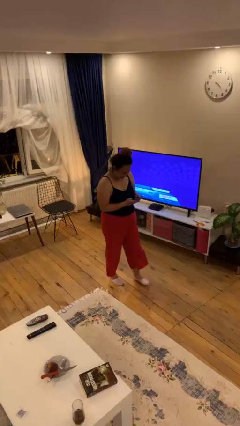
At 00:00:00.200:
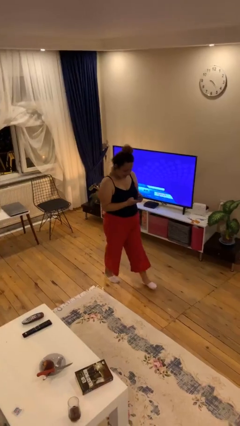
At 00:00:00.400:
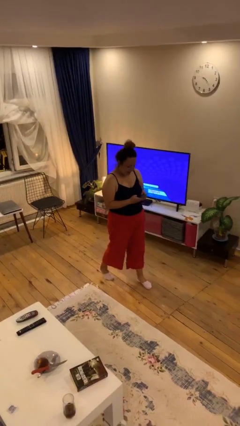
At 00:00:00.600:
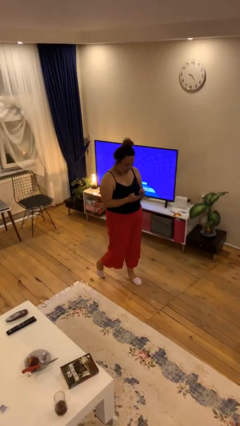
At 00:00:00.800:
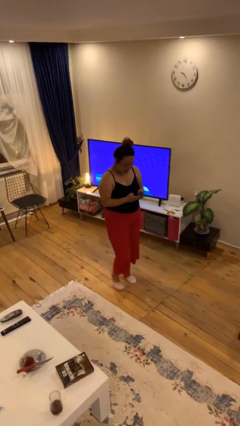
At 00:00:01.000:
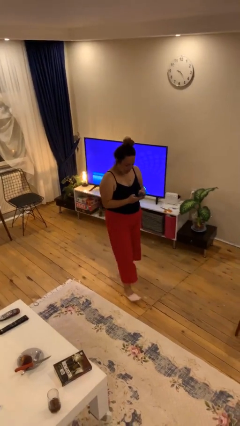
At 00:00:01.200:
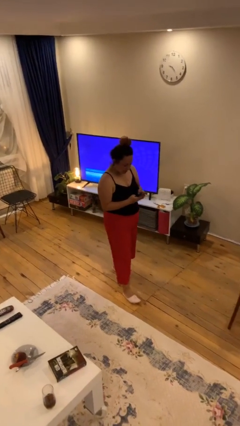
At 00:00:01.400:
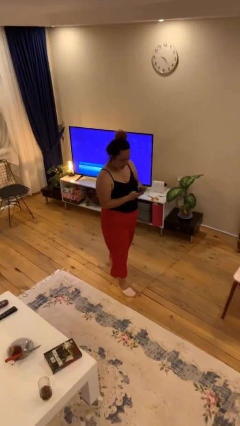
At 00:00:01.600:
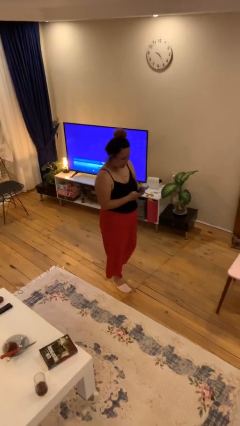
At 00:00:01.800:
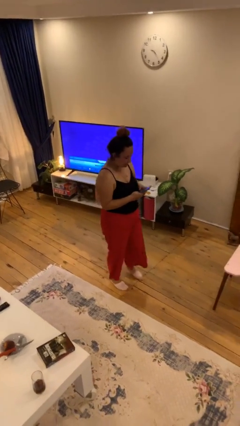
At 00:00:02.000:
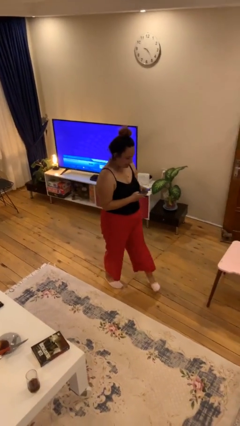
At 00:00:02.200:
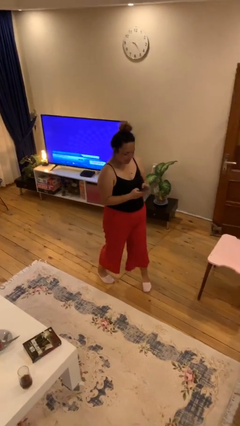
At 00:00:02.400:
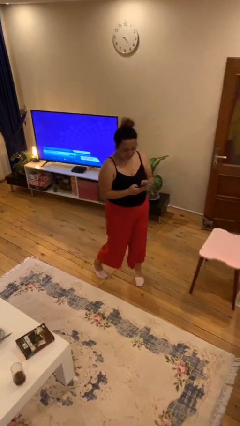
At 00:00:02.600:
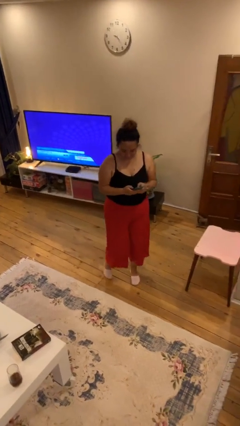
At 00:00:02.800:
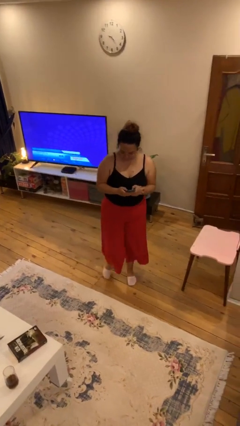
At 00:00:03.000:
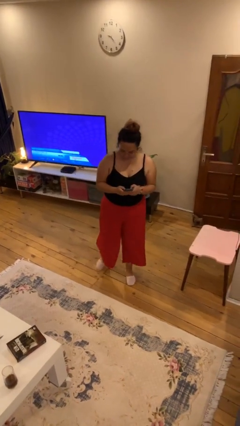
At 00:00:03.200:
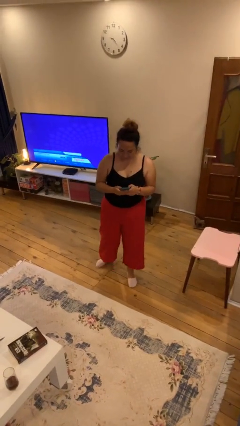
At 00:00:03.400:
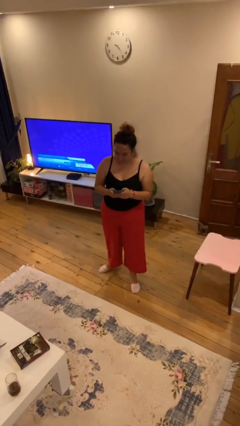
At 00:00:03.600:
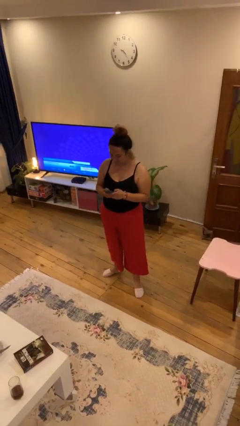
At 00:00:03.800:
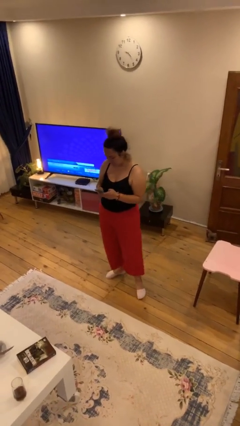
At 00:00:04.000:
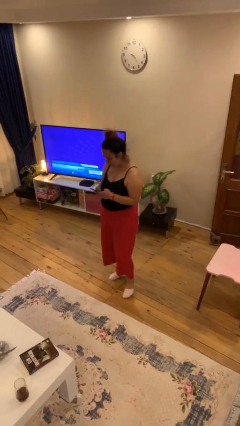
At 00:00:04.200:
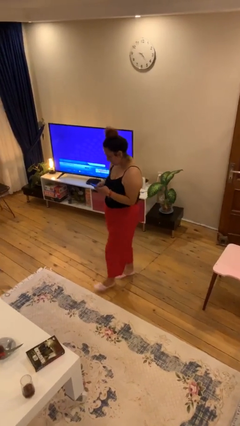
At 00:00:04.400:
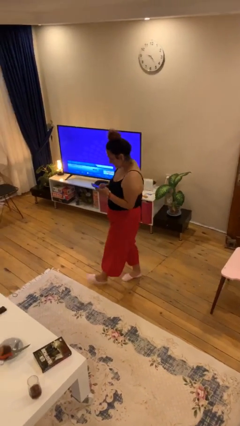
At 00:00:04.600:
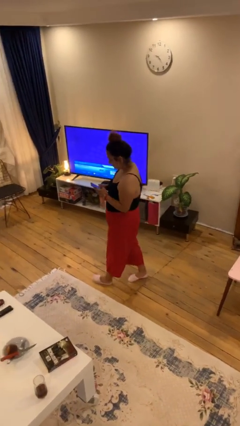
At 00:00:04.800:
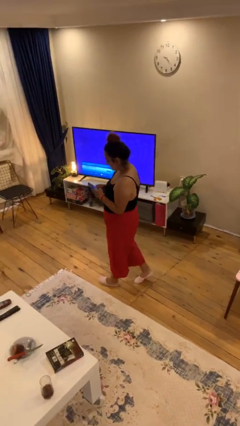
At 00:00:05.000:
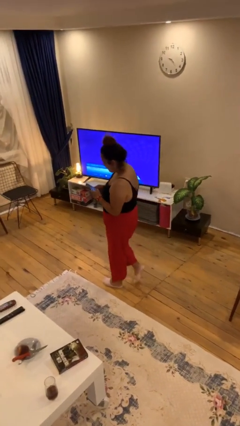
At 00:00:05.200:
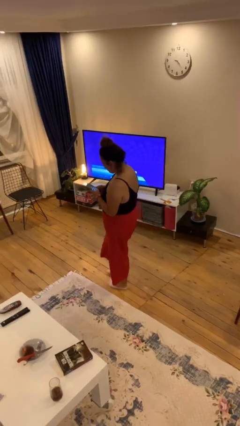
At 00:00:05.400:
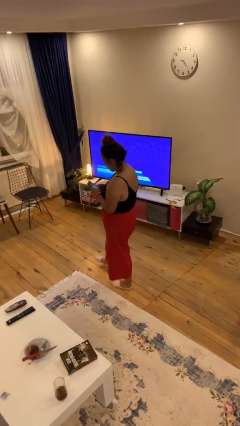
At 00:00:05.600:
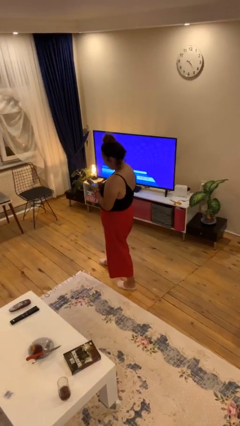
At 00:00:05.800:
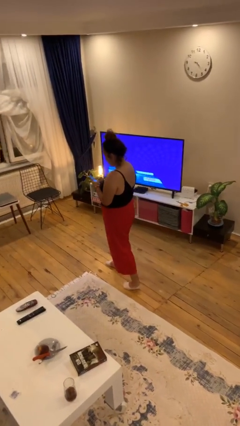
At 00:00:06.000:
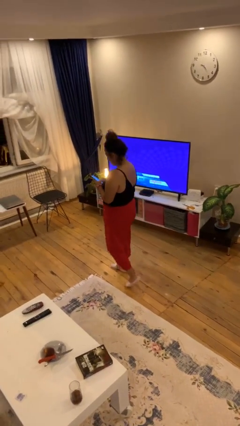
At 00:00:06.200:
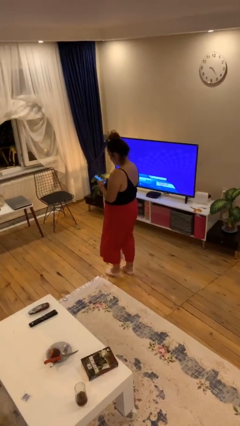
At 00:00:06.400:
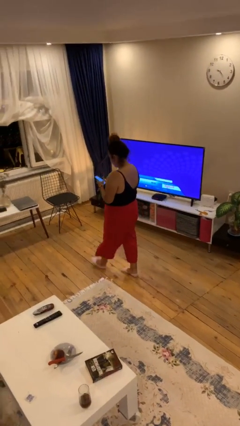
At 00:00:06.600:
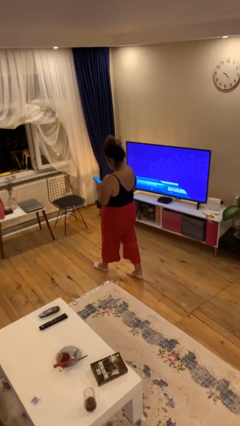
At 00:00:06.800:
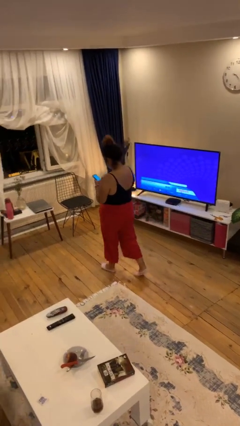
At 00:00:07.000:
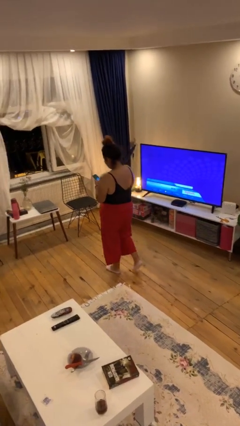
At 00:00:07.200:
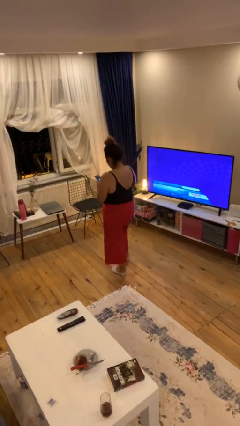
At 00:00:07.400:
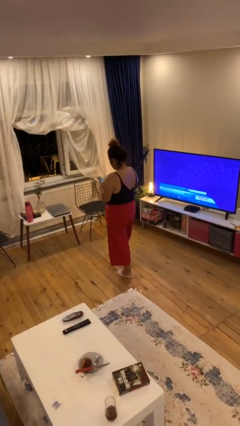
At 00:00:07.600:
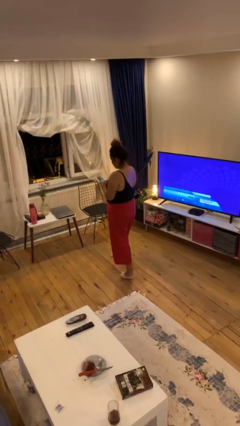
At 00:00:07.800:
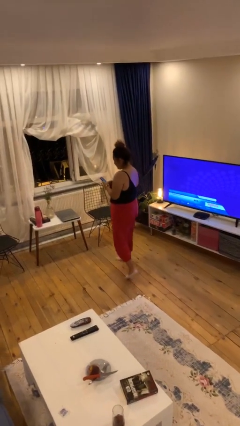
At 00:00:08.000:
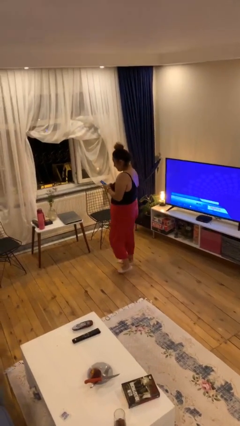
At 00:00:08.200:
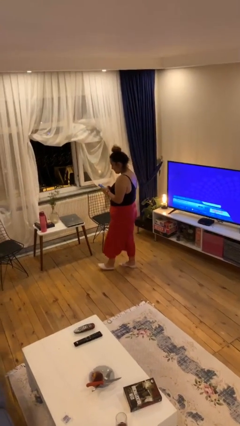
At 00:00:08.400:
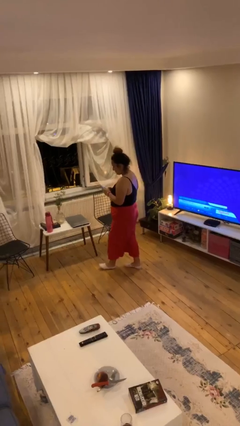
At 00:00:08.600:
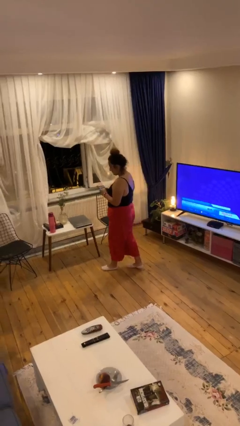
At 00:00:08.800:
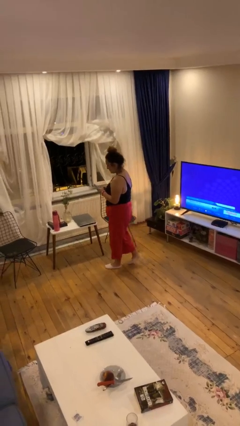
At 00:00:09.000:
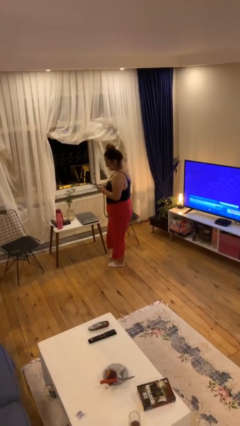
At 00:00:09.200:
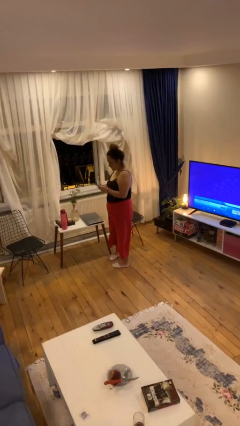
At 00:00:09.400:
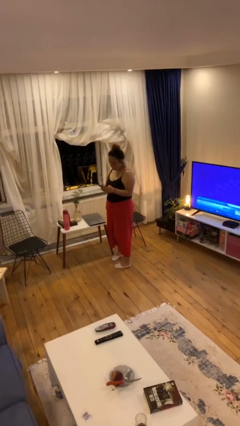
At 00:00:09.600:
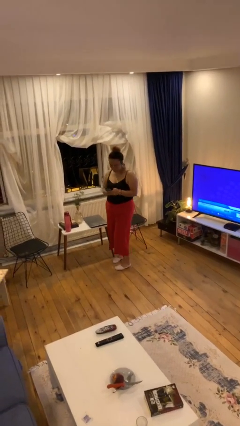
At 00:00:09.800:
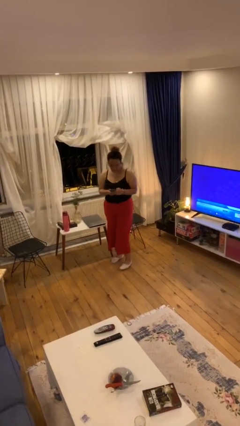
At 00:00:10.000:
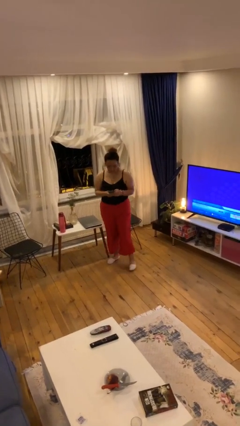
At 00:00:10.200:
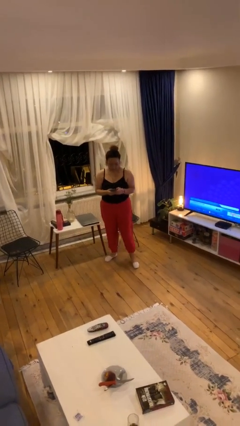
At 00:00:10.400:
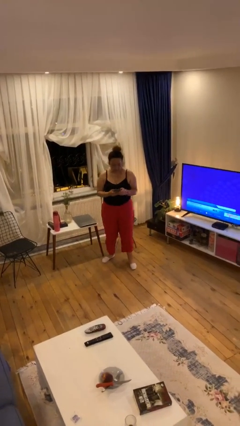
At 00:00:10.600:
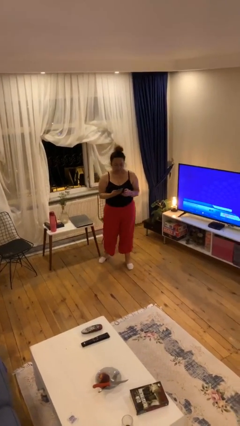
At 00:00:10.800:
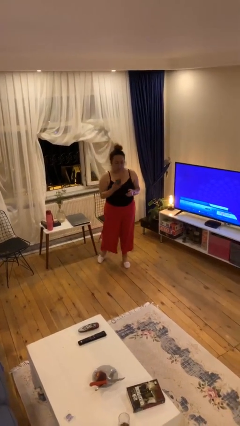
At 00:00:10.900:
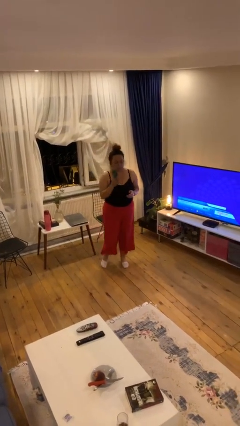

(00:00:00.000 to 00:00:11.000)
person texts on phone

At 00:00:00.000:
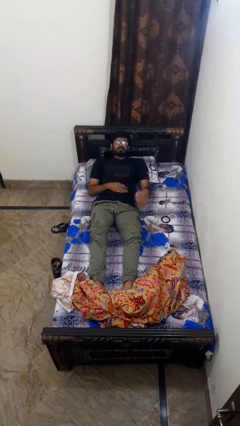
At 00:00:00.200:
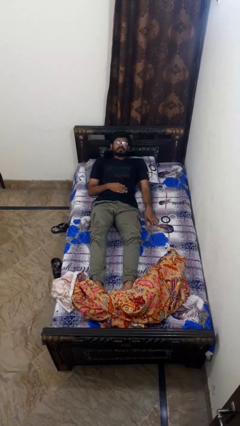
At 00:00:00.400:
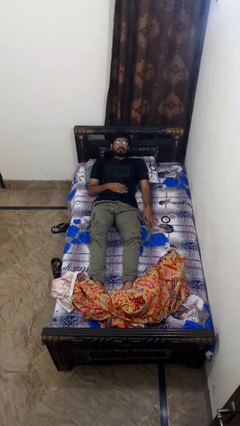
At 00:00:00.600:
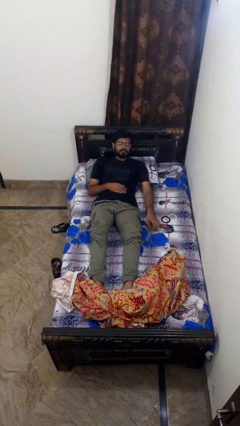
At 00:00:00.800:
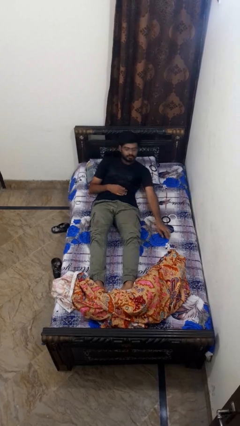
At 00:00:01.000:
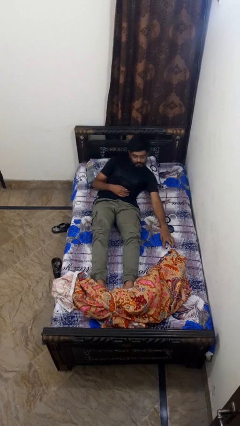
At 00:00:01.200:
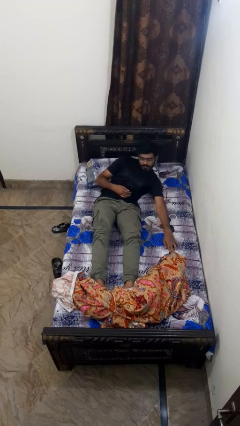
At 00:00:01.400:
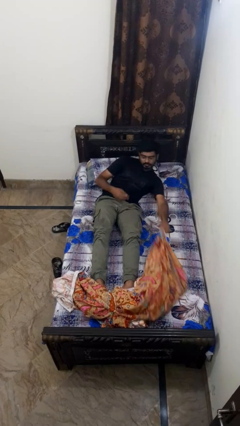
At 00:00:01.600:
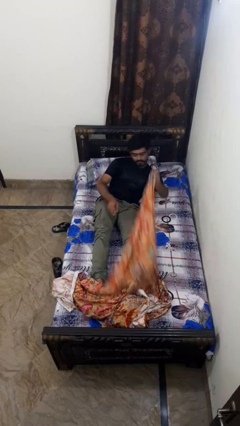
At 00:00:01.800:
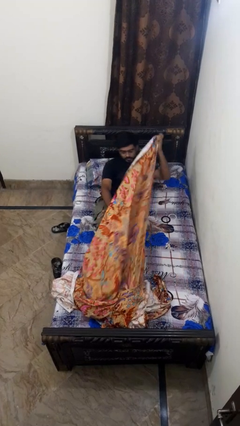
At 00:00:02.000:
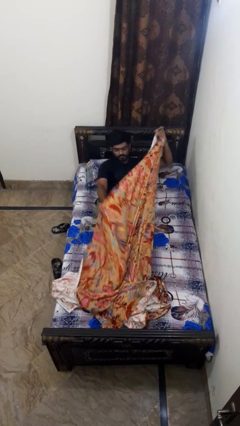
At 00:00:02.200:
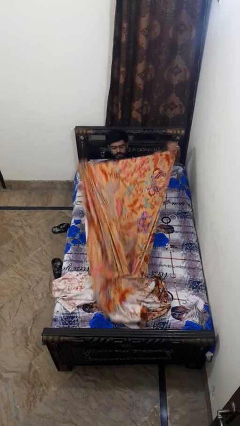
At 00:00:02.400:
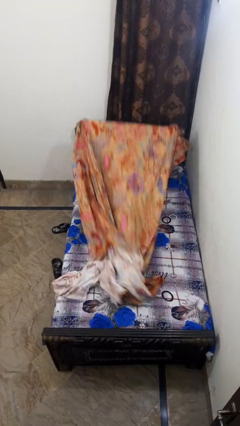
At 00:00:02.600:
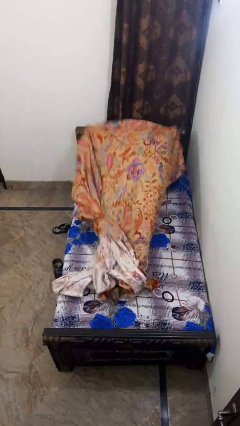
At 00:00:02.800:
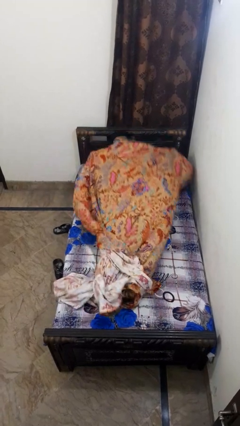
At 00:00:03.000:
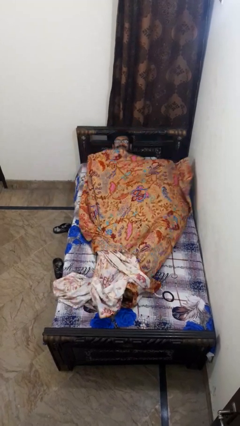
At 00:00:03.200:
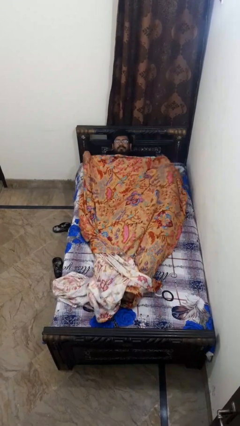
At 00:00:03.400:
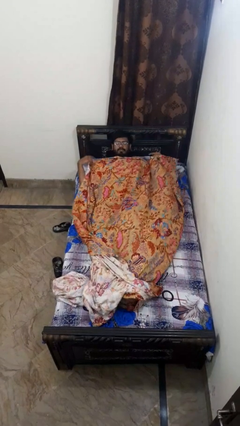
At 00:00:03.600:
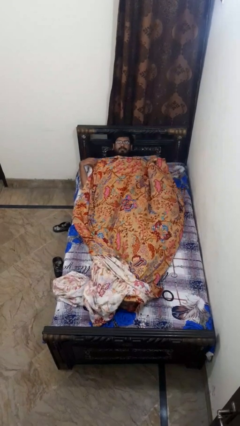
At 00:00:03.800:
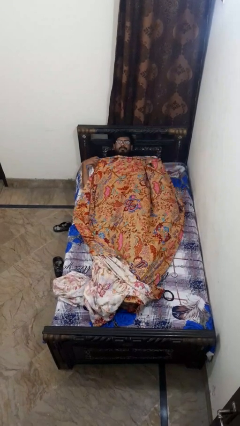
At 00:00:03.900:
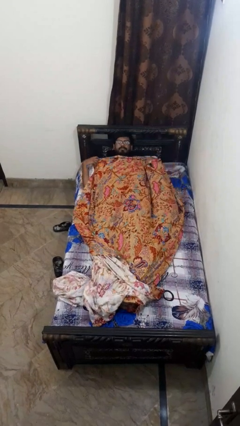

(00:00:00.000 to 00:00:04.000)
person covers with bedsheets

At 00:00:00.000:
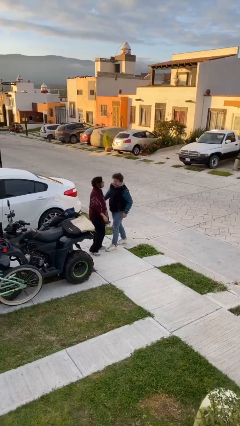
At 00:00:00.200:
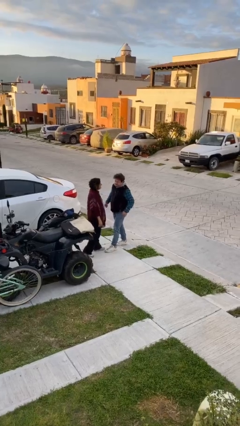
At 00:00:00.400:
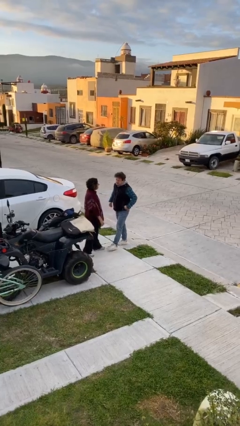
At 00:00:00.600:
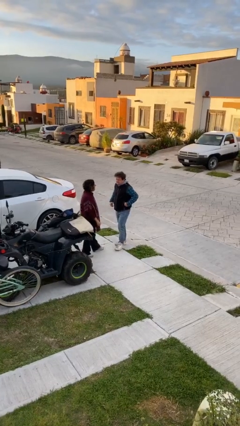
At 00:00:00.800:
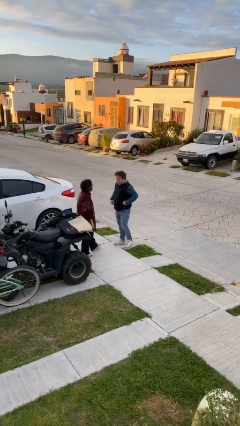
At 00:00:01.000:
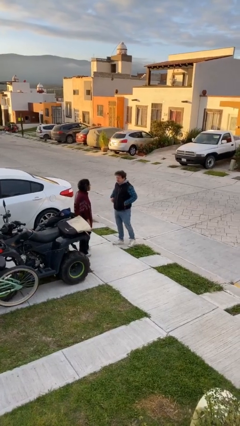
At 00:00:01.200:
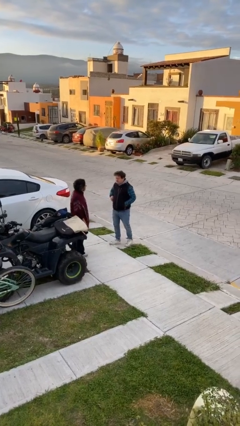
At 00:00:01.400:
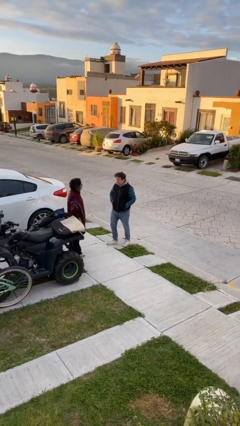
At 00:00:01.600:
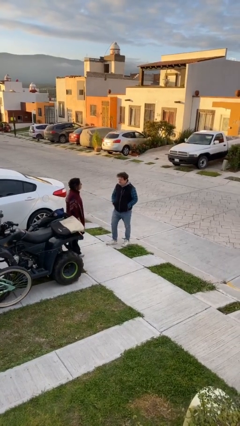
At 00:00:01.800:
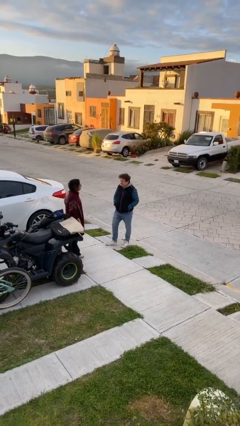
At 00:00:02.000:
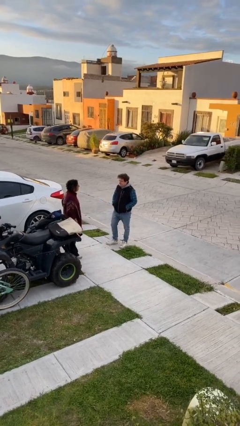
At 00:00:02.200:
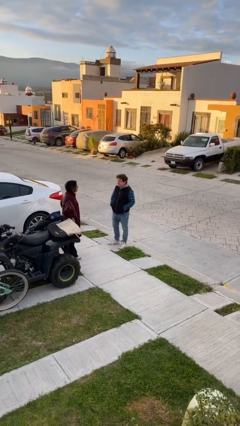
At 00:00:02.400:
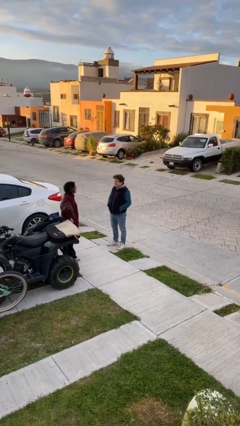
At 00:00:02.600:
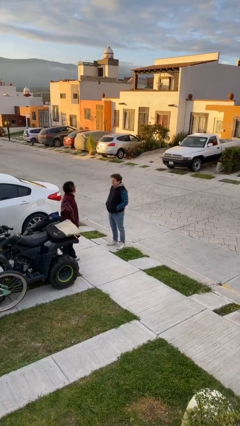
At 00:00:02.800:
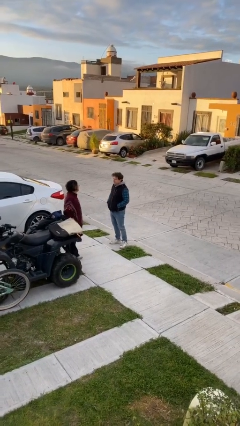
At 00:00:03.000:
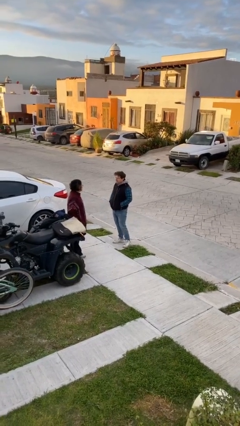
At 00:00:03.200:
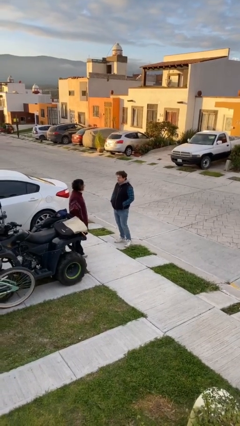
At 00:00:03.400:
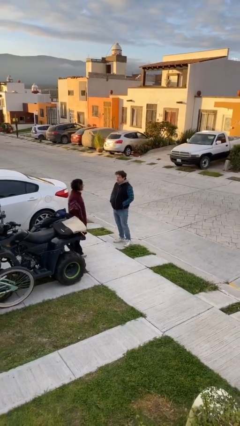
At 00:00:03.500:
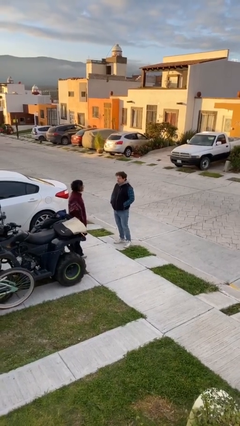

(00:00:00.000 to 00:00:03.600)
person talks to person
